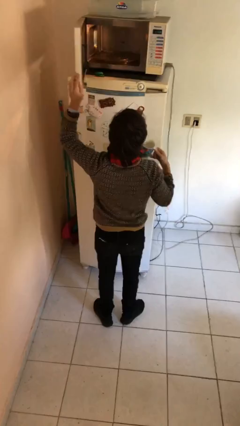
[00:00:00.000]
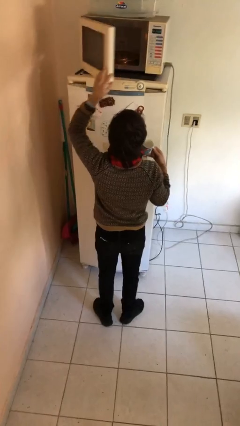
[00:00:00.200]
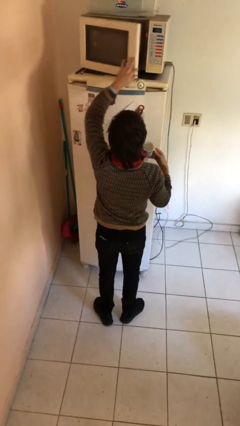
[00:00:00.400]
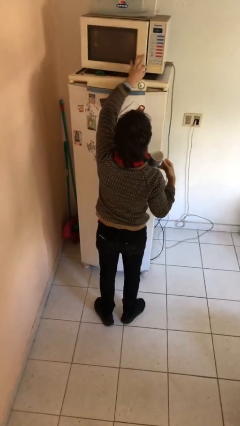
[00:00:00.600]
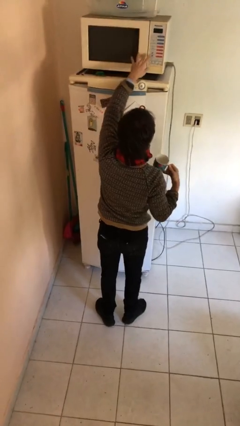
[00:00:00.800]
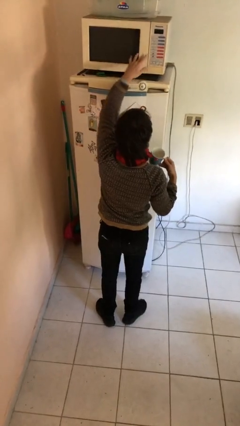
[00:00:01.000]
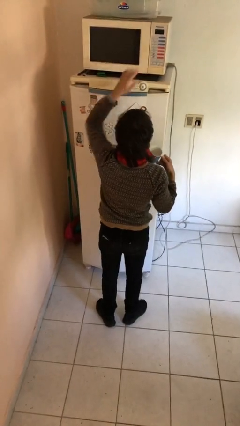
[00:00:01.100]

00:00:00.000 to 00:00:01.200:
person closes microwave

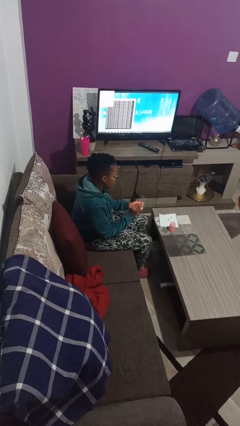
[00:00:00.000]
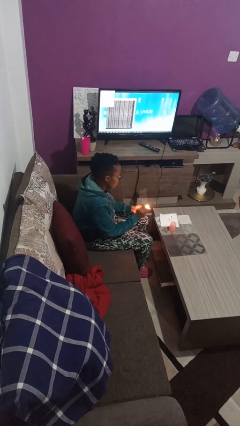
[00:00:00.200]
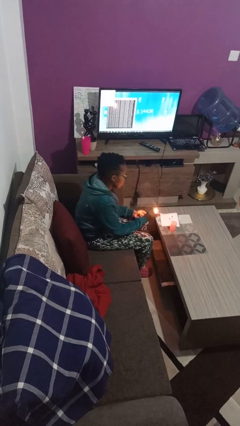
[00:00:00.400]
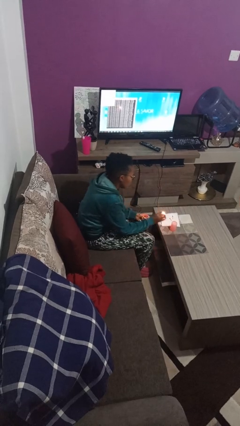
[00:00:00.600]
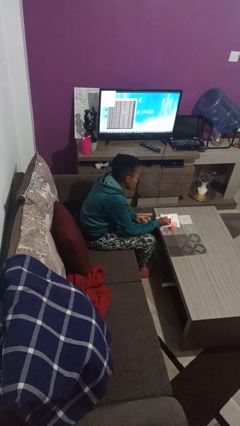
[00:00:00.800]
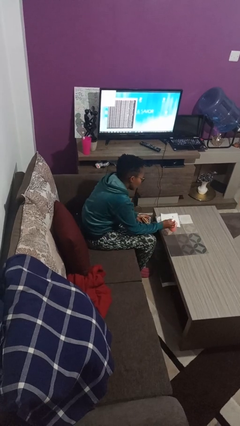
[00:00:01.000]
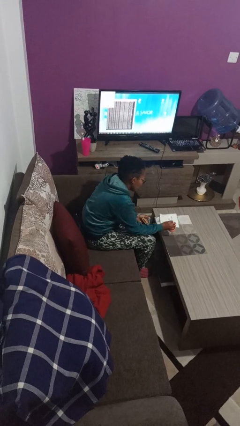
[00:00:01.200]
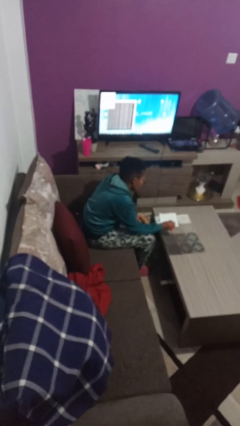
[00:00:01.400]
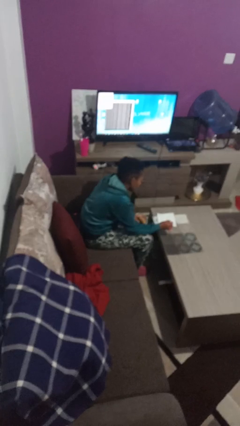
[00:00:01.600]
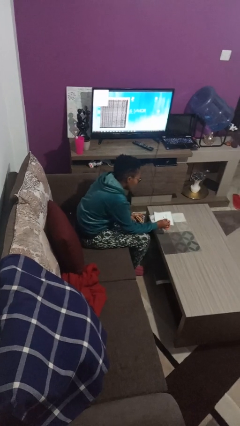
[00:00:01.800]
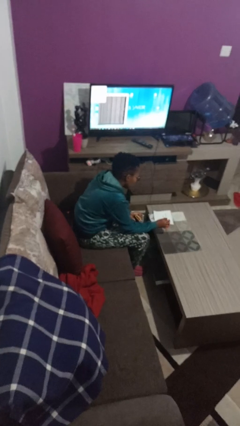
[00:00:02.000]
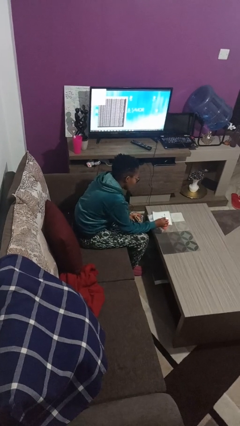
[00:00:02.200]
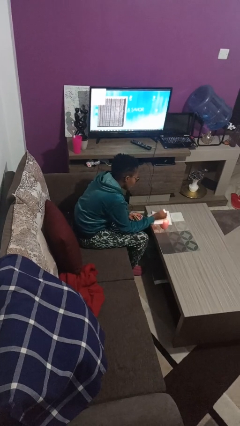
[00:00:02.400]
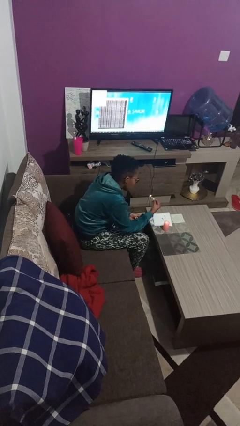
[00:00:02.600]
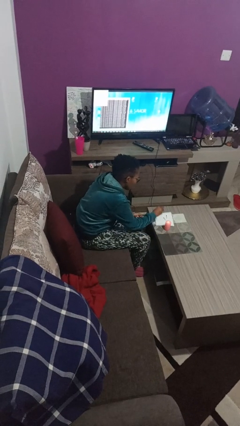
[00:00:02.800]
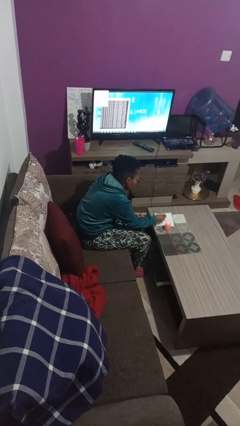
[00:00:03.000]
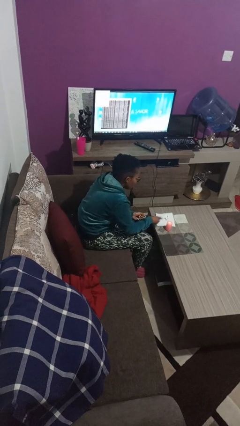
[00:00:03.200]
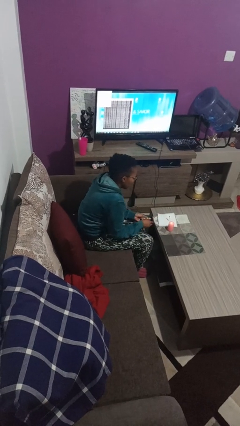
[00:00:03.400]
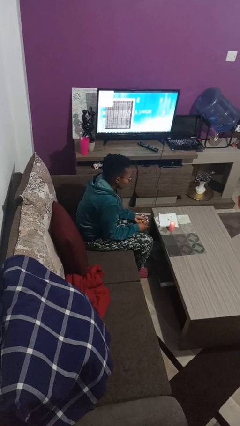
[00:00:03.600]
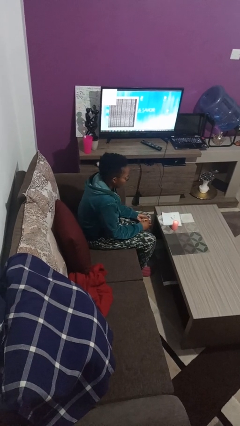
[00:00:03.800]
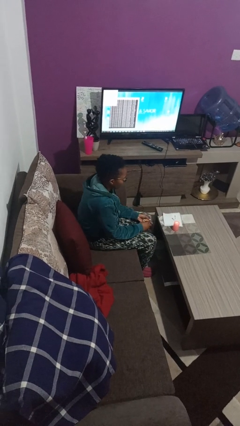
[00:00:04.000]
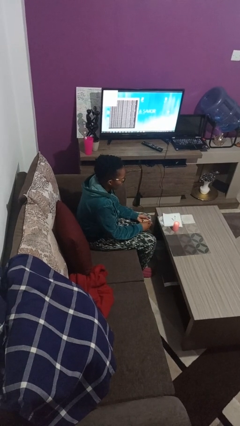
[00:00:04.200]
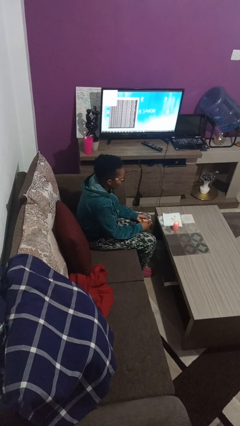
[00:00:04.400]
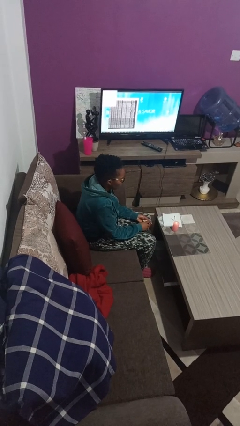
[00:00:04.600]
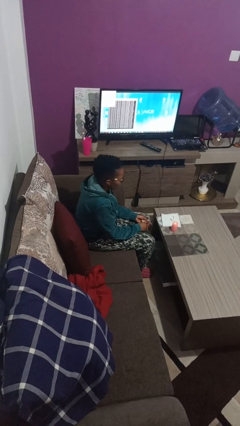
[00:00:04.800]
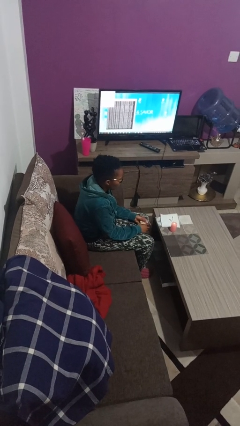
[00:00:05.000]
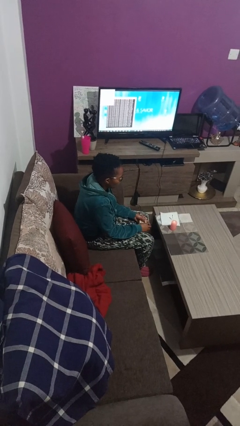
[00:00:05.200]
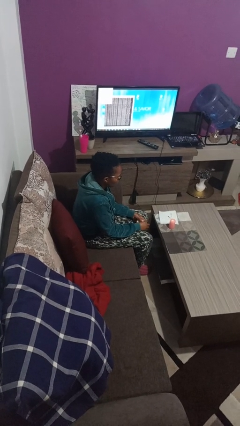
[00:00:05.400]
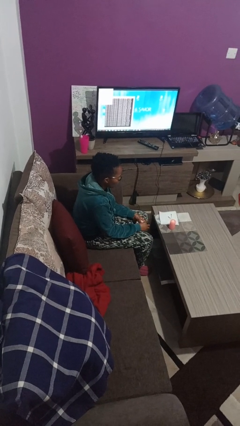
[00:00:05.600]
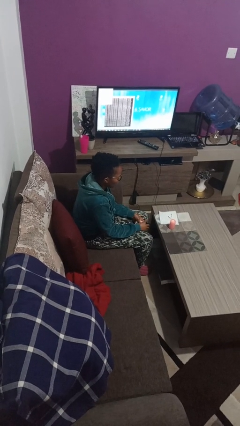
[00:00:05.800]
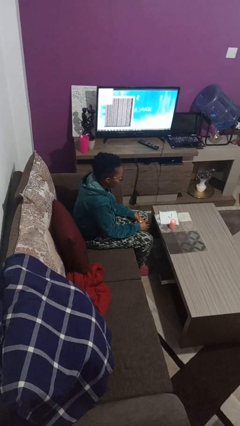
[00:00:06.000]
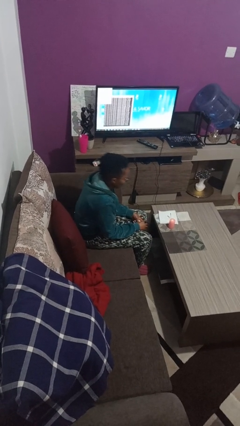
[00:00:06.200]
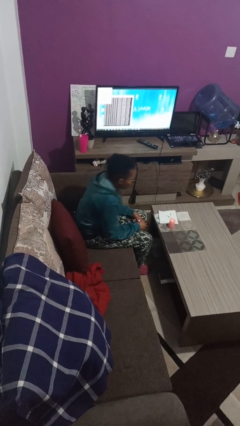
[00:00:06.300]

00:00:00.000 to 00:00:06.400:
person lights candle

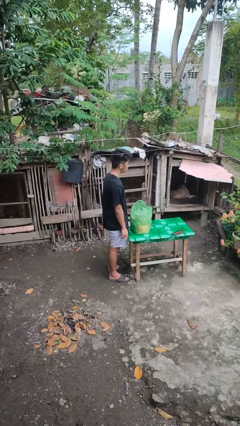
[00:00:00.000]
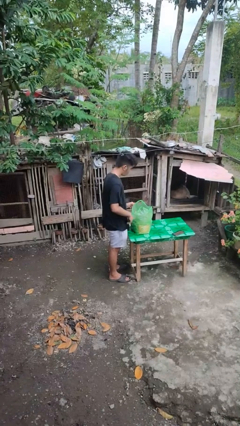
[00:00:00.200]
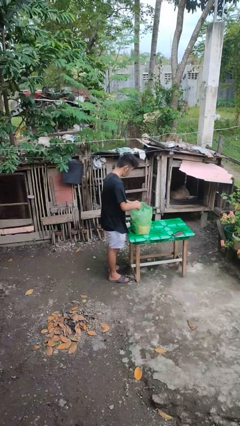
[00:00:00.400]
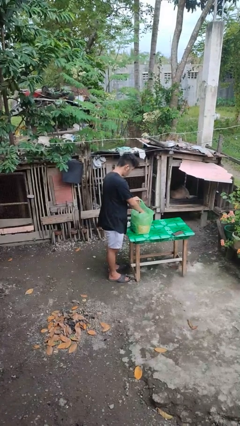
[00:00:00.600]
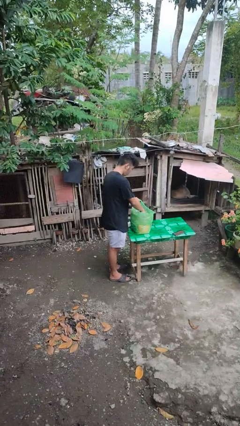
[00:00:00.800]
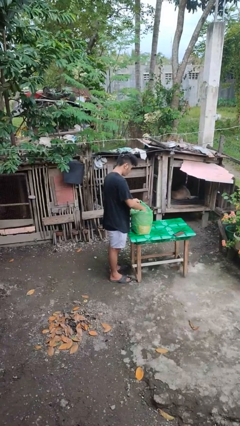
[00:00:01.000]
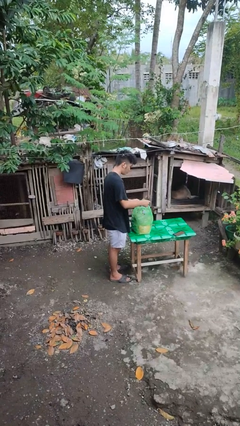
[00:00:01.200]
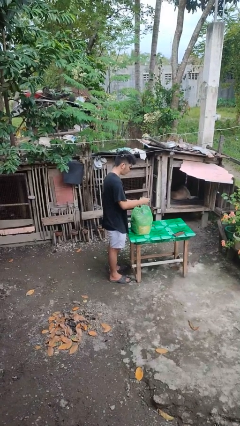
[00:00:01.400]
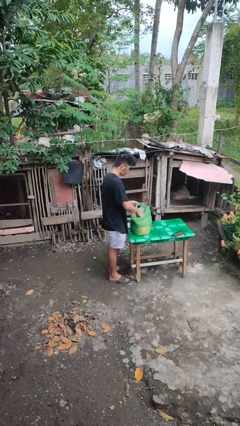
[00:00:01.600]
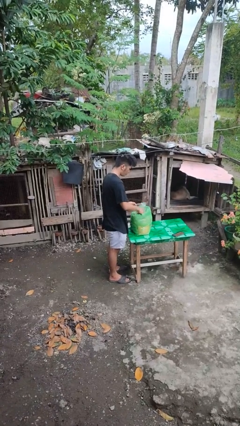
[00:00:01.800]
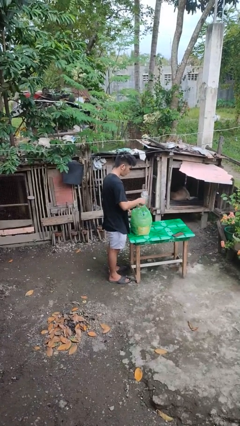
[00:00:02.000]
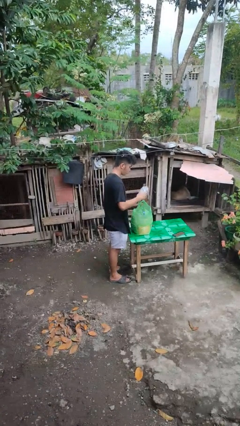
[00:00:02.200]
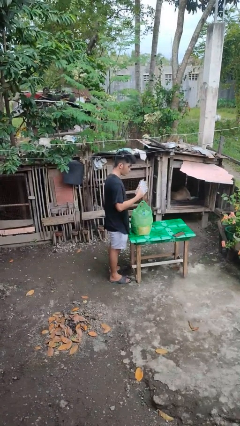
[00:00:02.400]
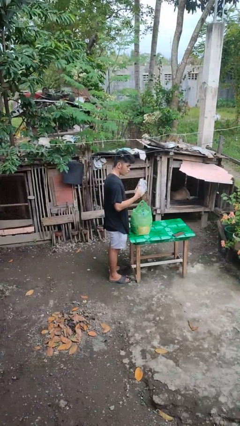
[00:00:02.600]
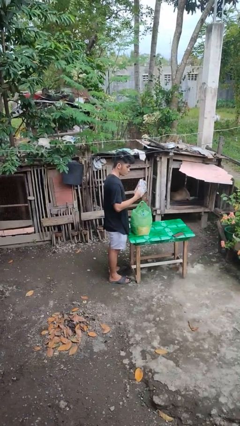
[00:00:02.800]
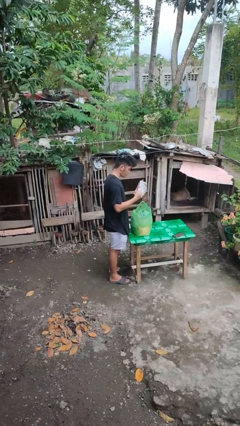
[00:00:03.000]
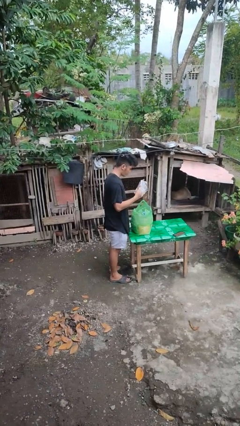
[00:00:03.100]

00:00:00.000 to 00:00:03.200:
person takes object from bag

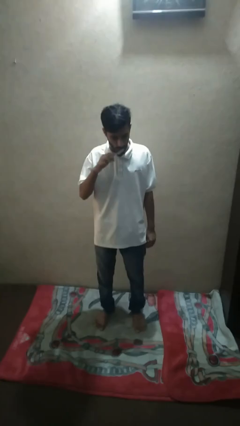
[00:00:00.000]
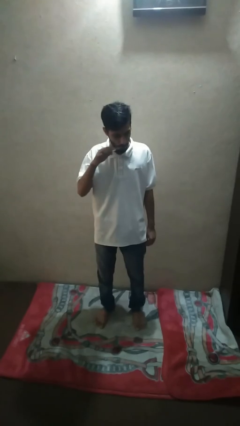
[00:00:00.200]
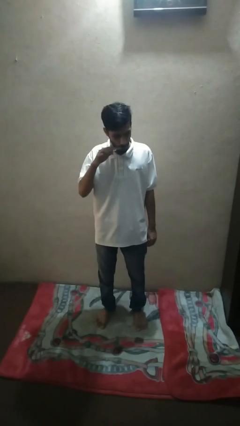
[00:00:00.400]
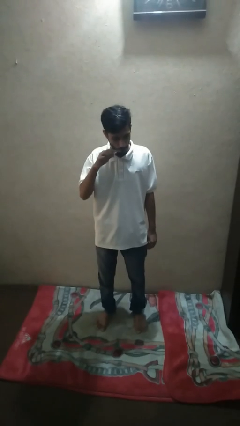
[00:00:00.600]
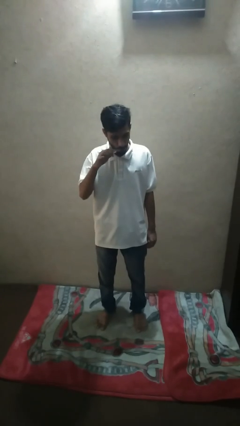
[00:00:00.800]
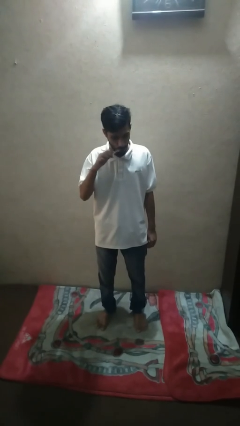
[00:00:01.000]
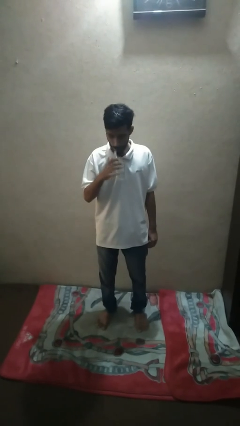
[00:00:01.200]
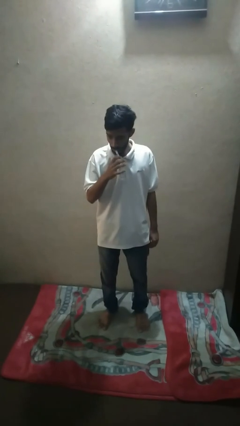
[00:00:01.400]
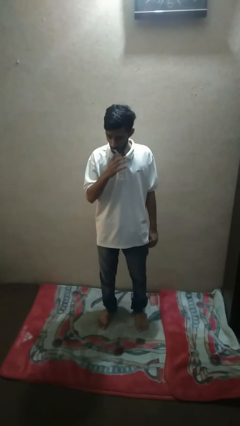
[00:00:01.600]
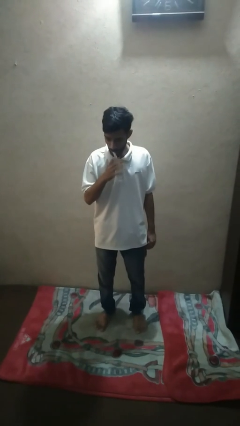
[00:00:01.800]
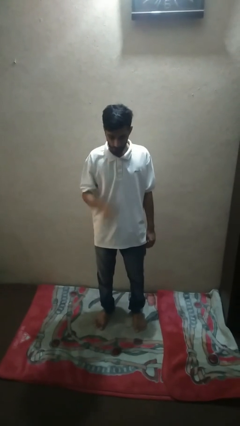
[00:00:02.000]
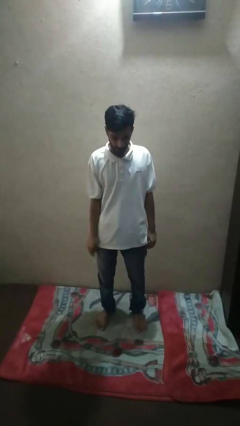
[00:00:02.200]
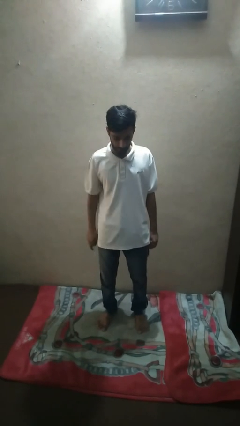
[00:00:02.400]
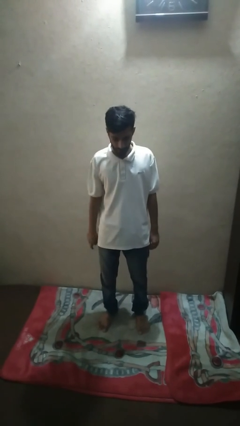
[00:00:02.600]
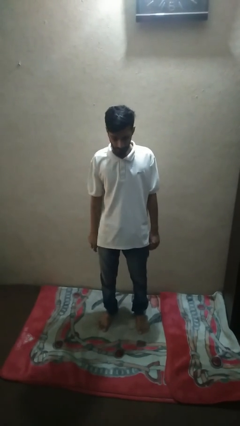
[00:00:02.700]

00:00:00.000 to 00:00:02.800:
person brushes teeth

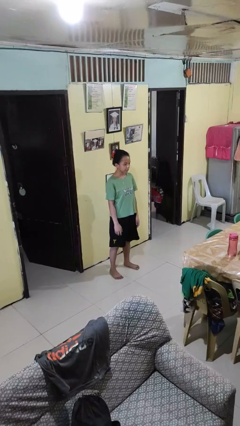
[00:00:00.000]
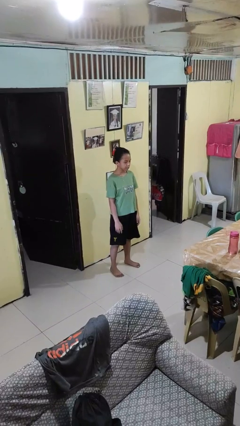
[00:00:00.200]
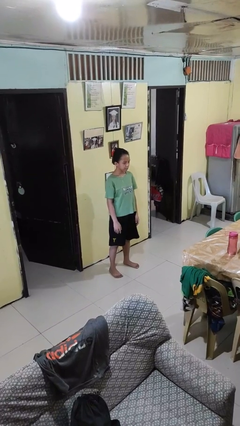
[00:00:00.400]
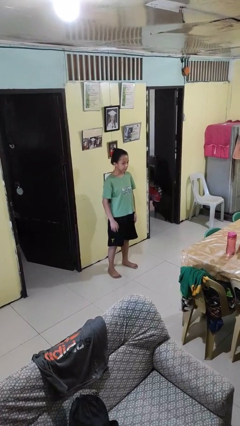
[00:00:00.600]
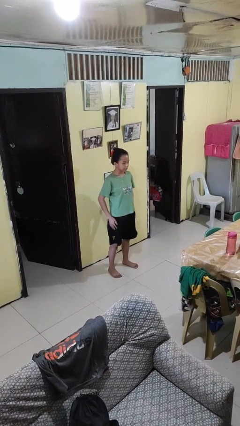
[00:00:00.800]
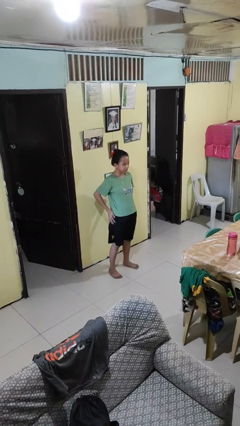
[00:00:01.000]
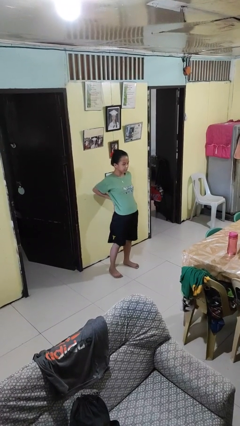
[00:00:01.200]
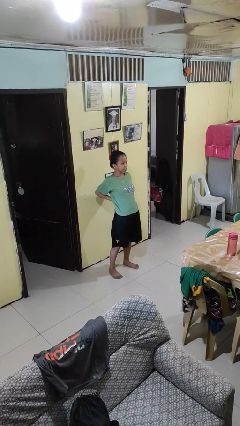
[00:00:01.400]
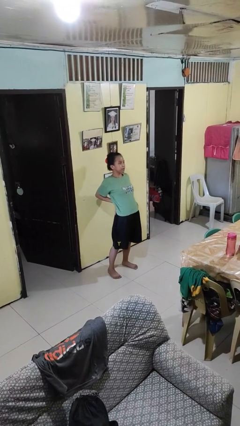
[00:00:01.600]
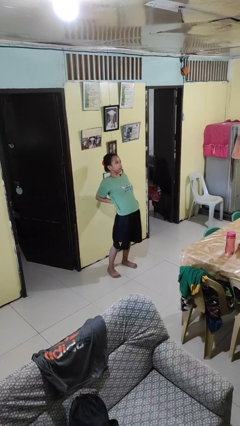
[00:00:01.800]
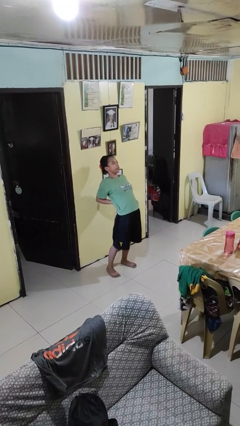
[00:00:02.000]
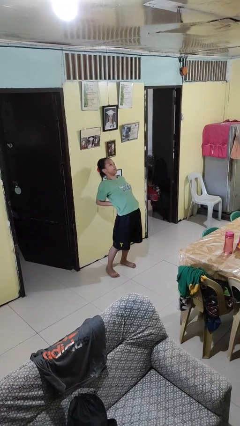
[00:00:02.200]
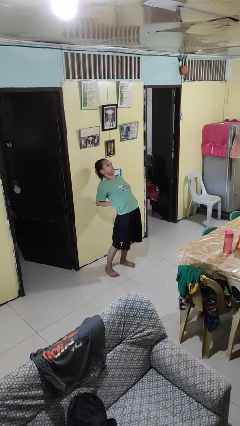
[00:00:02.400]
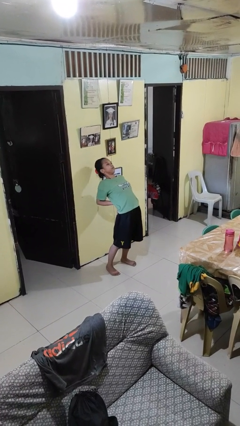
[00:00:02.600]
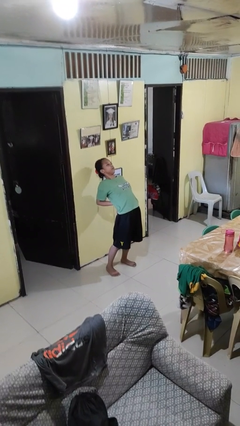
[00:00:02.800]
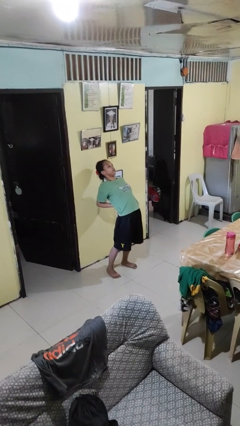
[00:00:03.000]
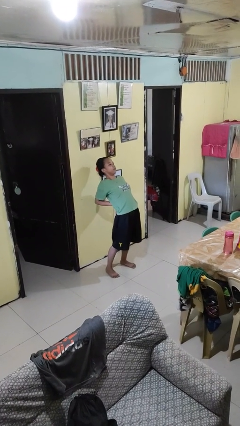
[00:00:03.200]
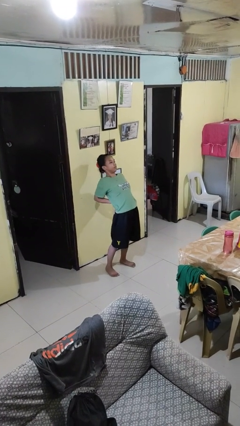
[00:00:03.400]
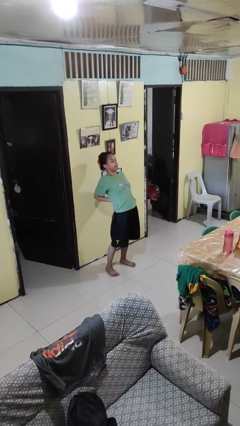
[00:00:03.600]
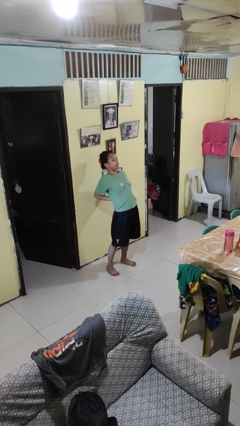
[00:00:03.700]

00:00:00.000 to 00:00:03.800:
person stretches back
